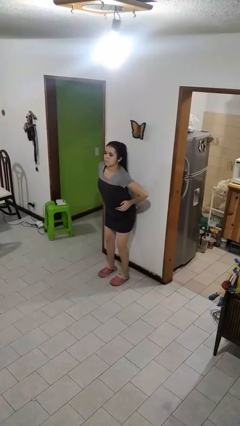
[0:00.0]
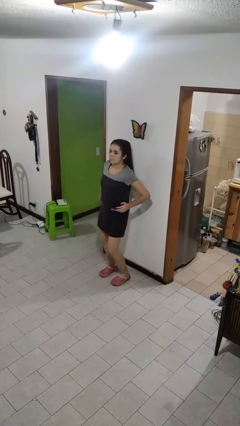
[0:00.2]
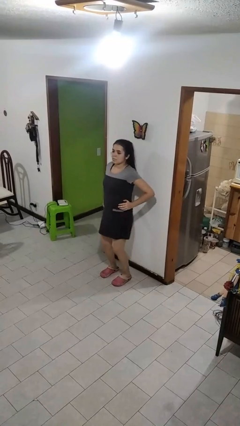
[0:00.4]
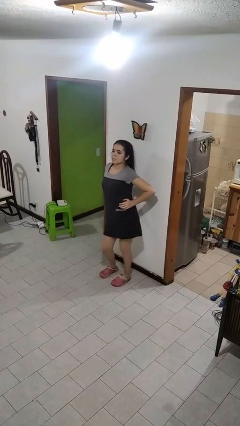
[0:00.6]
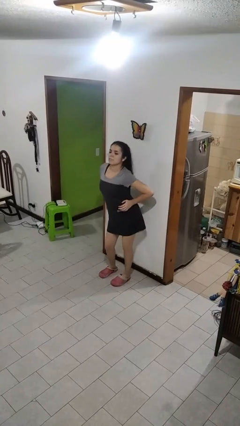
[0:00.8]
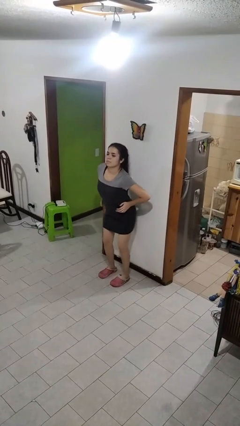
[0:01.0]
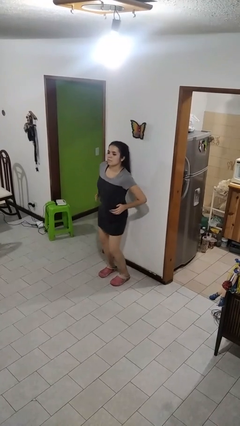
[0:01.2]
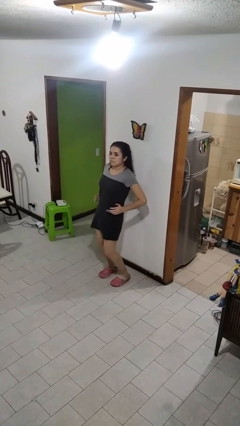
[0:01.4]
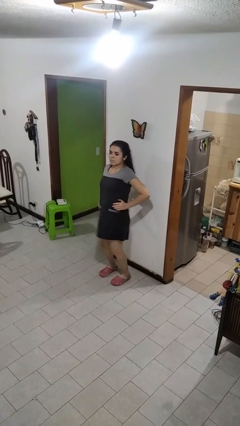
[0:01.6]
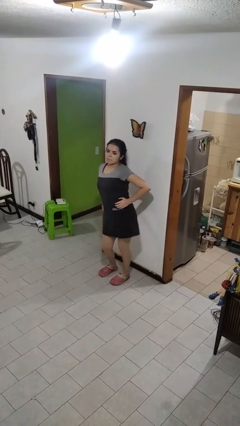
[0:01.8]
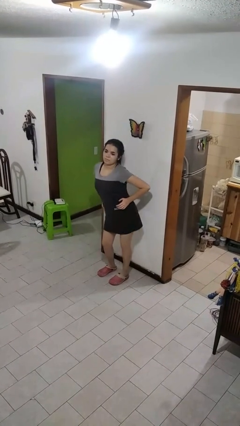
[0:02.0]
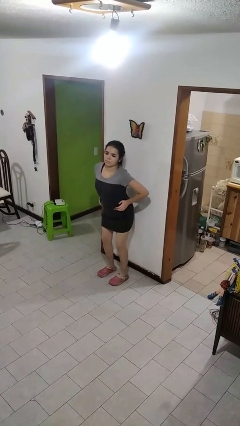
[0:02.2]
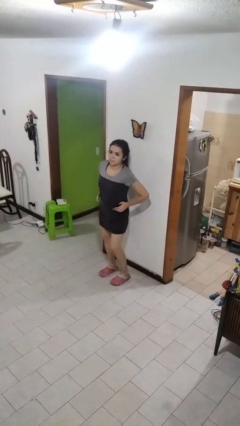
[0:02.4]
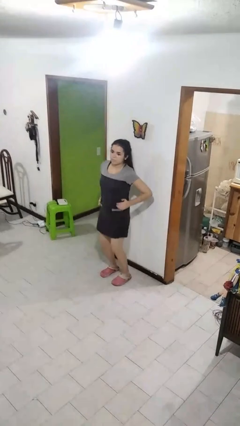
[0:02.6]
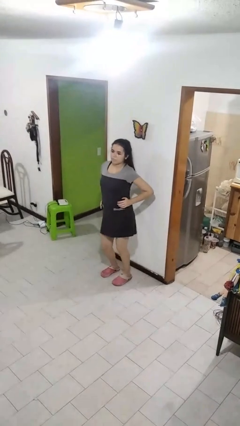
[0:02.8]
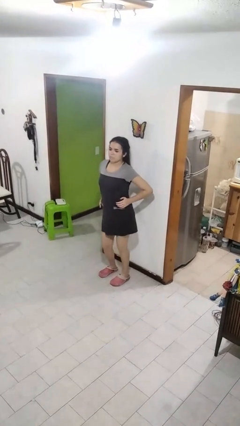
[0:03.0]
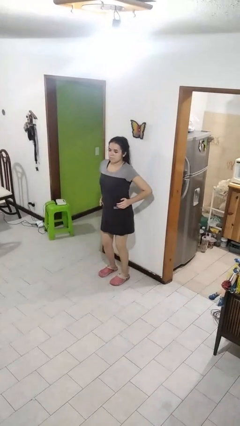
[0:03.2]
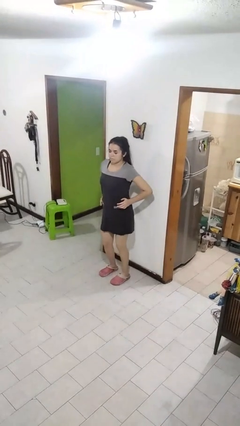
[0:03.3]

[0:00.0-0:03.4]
person wiggles hips

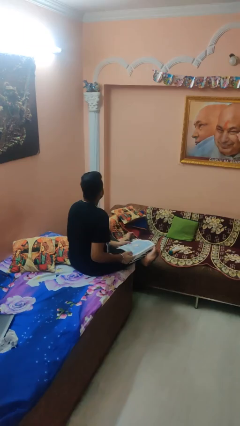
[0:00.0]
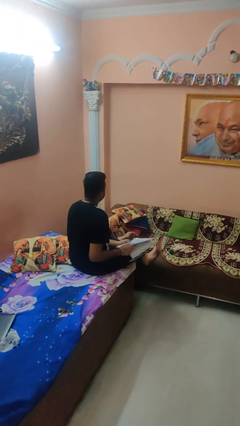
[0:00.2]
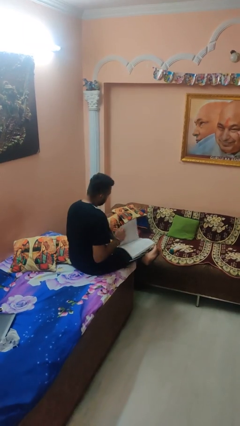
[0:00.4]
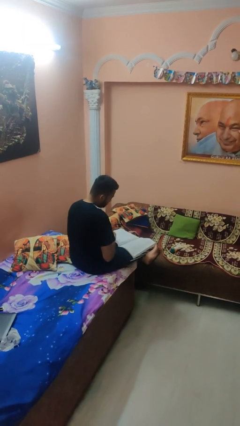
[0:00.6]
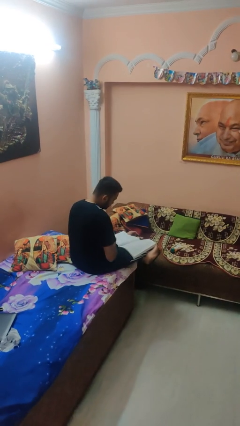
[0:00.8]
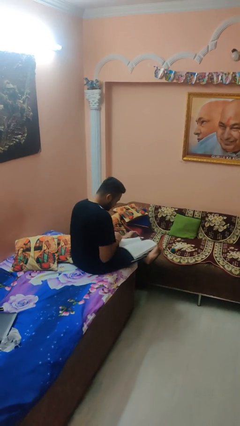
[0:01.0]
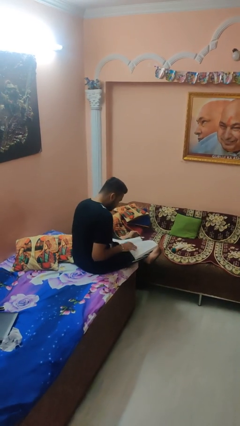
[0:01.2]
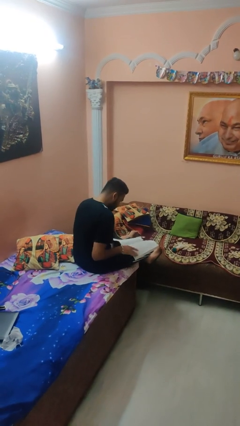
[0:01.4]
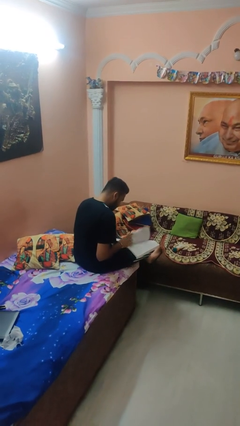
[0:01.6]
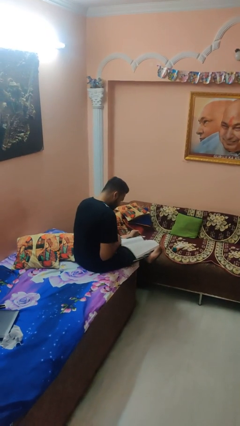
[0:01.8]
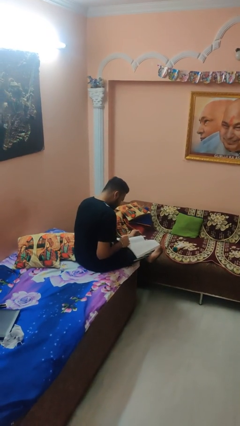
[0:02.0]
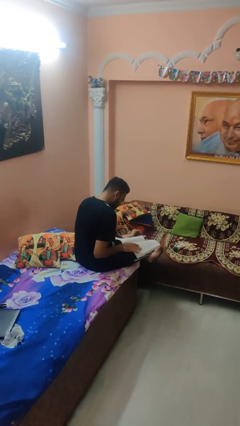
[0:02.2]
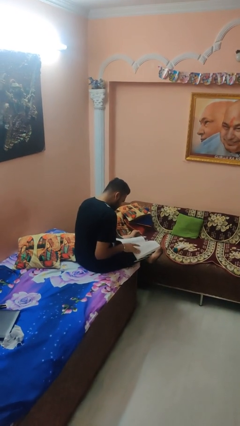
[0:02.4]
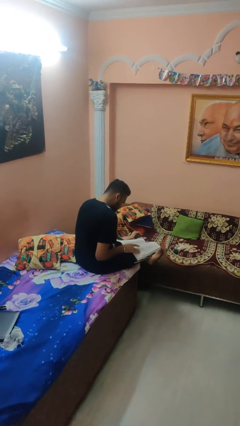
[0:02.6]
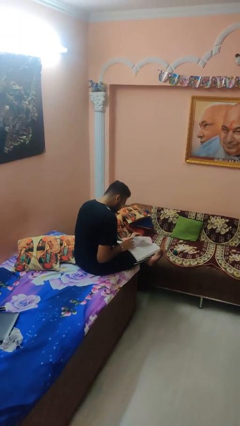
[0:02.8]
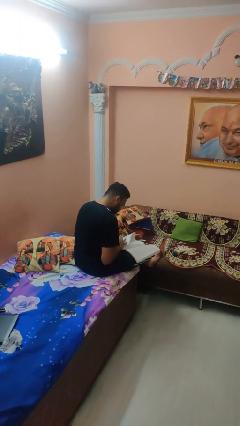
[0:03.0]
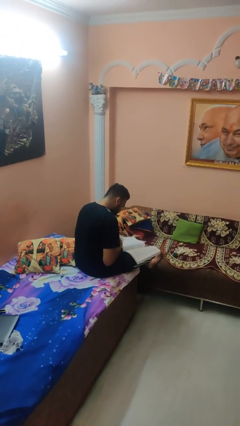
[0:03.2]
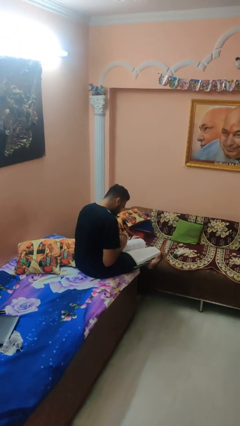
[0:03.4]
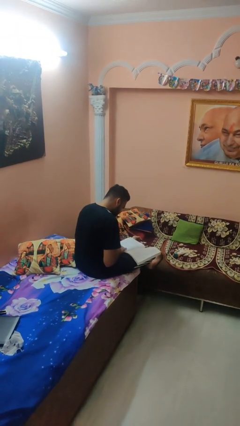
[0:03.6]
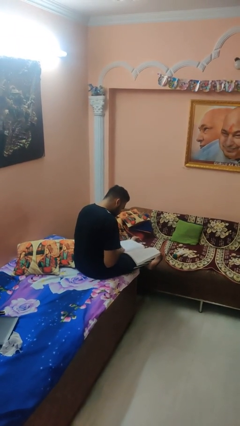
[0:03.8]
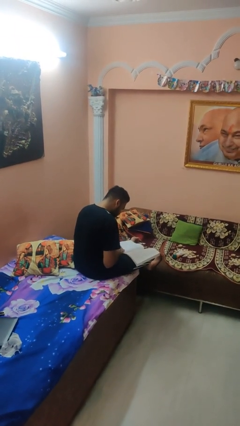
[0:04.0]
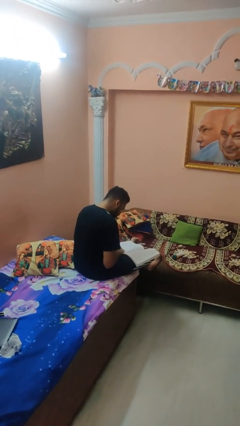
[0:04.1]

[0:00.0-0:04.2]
person reads book

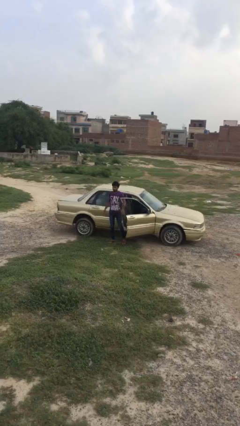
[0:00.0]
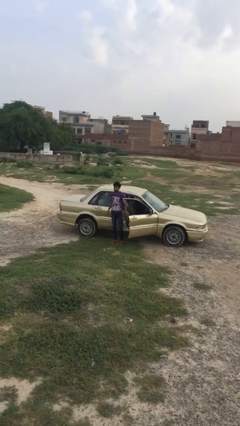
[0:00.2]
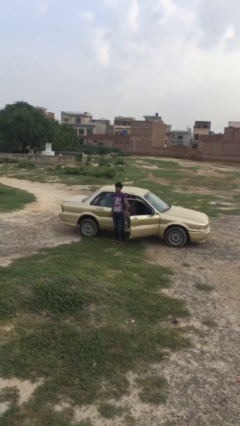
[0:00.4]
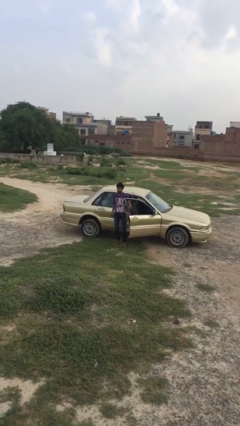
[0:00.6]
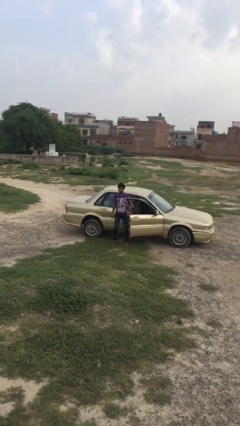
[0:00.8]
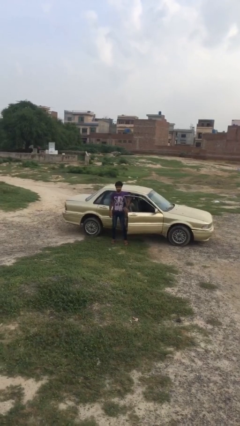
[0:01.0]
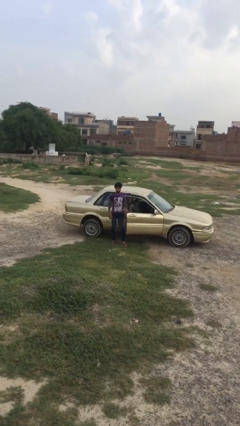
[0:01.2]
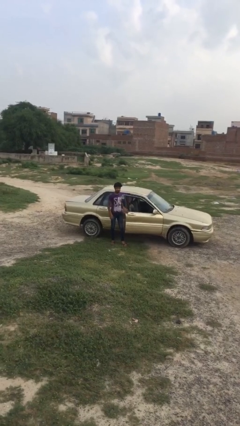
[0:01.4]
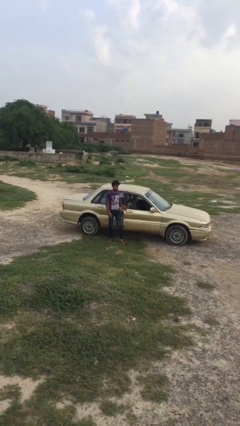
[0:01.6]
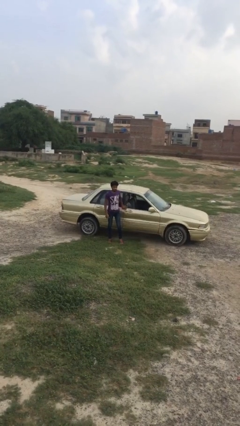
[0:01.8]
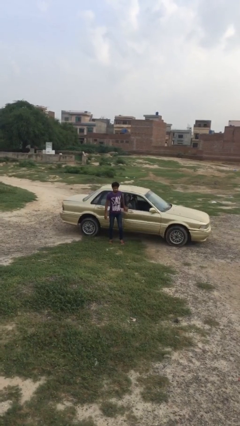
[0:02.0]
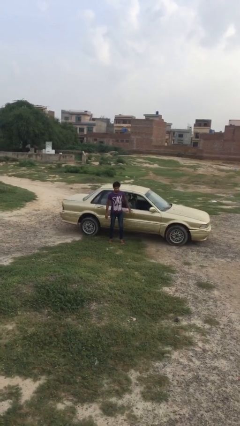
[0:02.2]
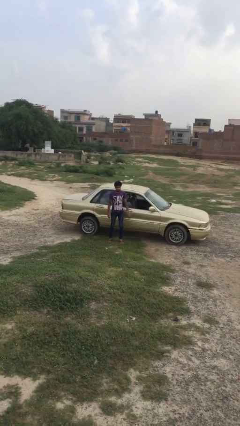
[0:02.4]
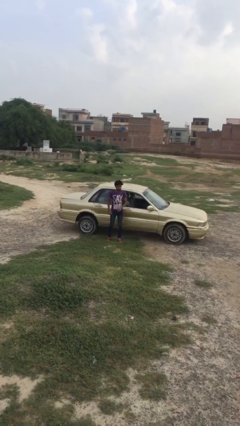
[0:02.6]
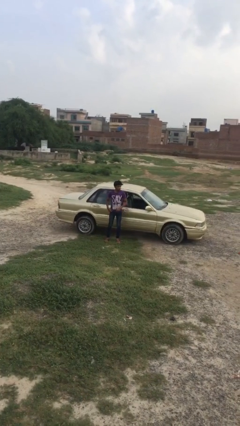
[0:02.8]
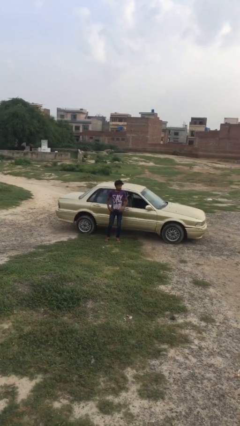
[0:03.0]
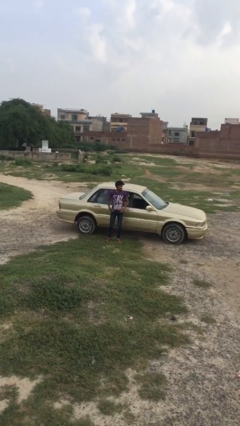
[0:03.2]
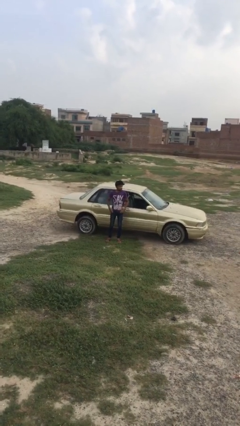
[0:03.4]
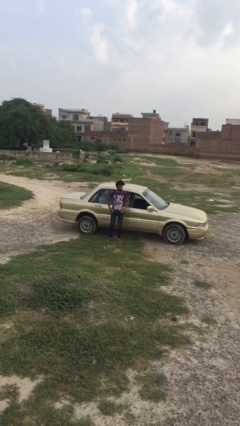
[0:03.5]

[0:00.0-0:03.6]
person closes car door

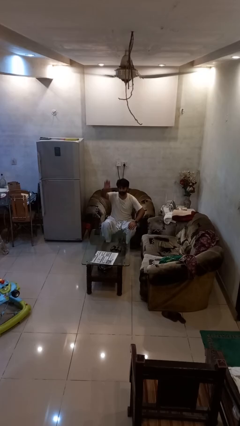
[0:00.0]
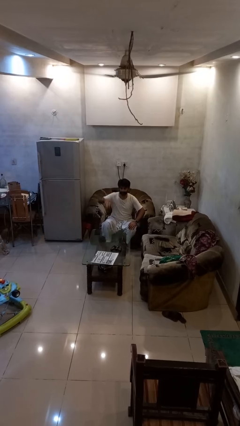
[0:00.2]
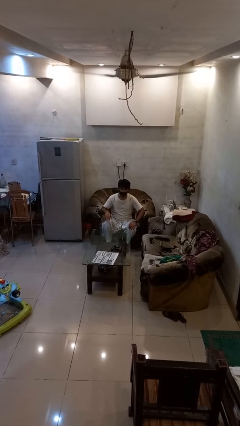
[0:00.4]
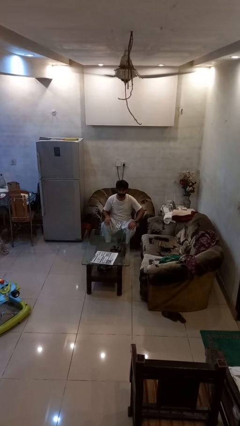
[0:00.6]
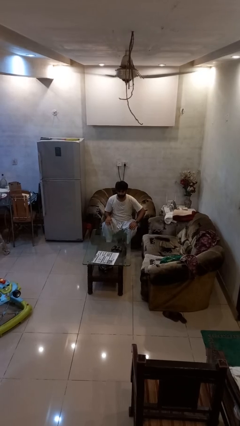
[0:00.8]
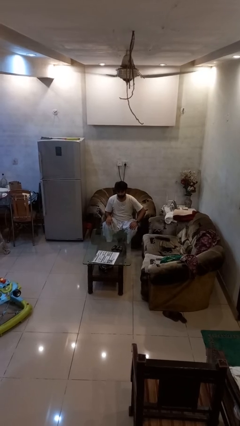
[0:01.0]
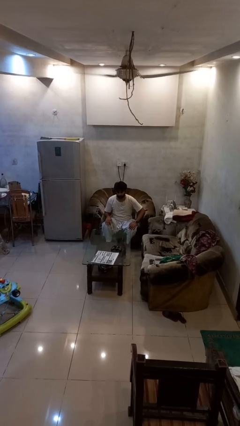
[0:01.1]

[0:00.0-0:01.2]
person gestures lower hand

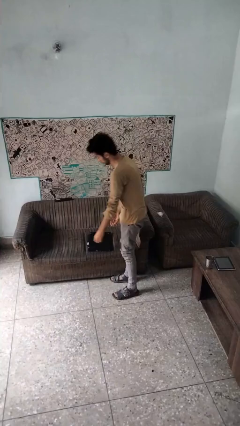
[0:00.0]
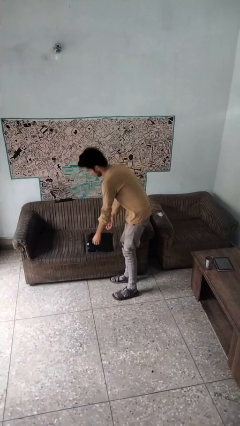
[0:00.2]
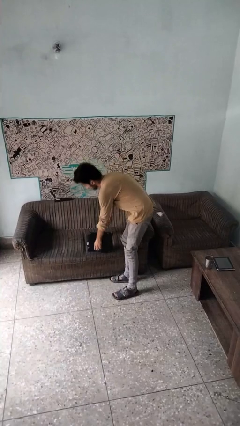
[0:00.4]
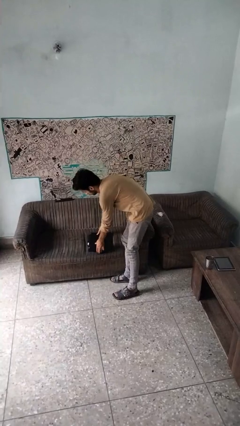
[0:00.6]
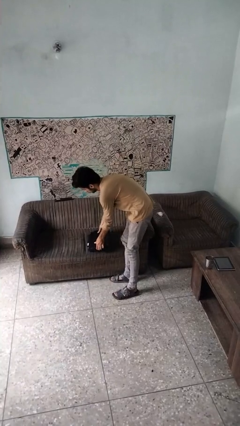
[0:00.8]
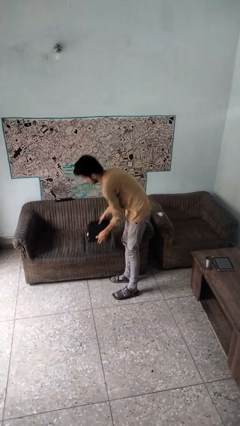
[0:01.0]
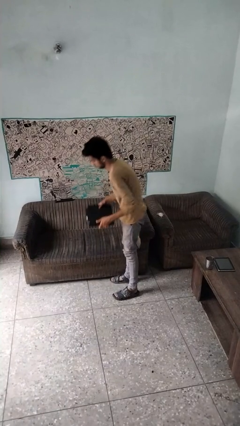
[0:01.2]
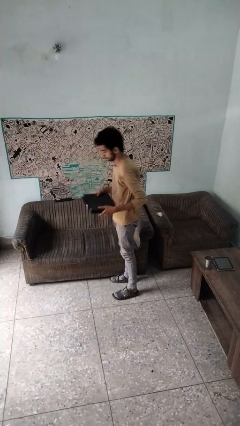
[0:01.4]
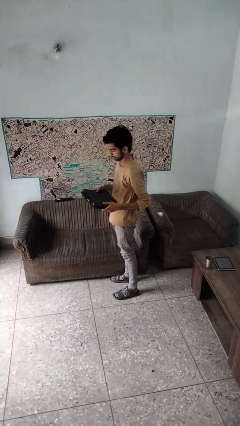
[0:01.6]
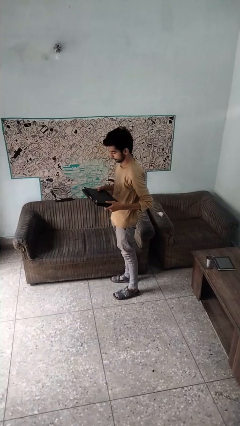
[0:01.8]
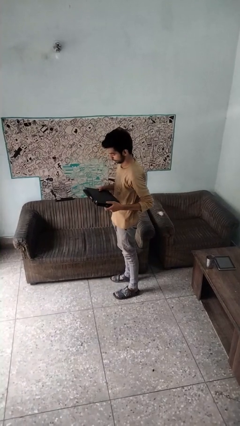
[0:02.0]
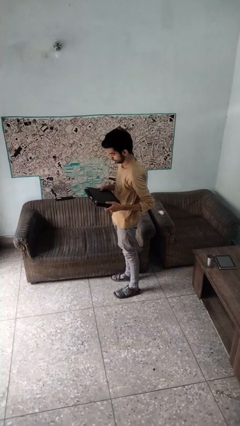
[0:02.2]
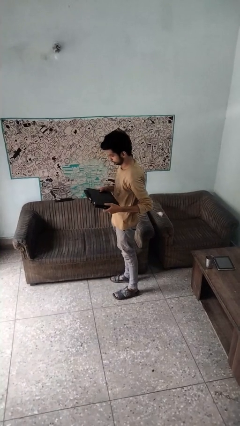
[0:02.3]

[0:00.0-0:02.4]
person picks up object from couch

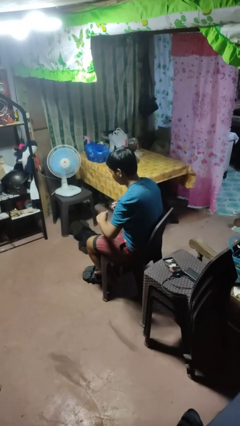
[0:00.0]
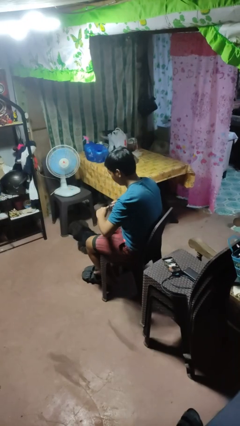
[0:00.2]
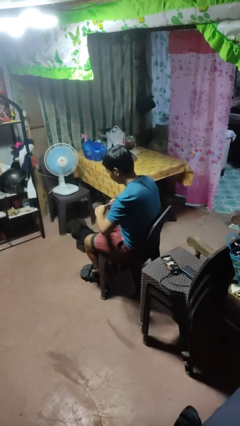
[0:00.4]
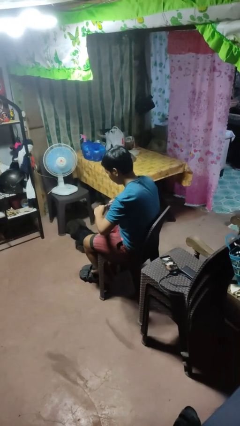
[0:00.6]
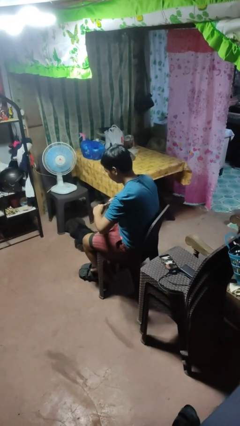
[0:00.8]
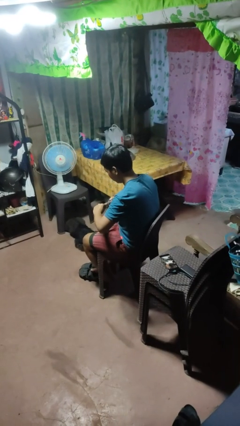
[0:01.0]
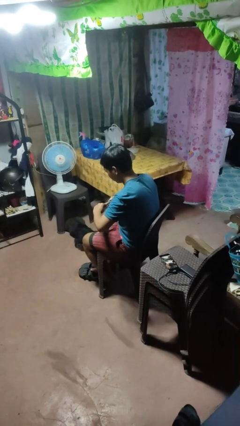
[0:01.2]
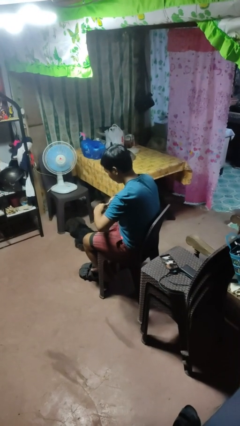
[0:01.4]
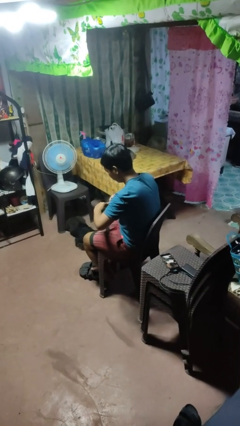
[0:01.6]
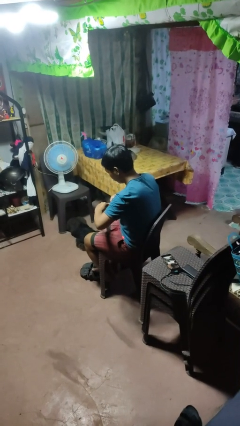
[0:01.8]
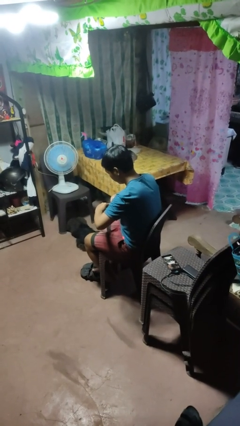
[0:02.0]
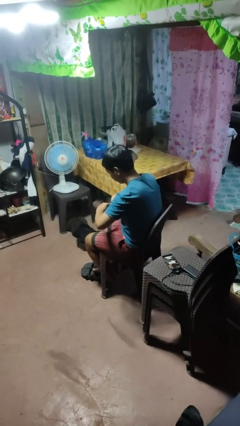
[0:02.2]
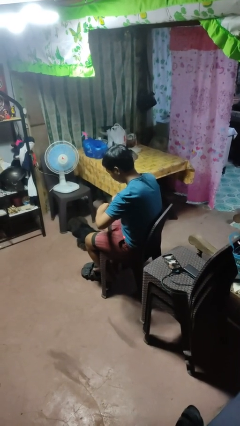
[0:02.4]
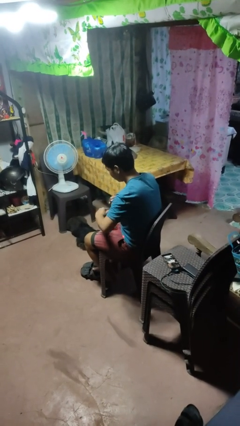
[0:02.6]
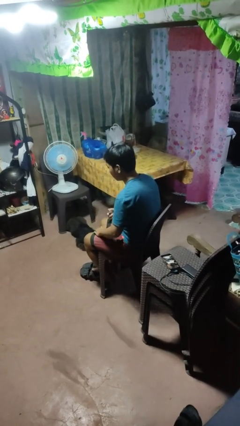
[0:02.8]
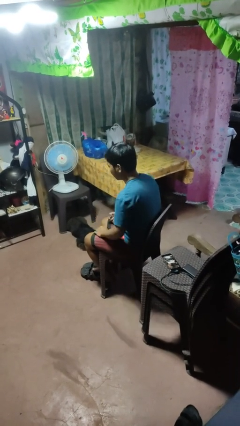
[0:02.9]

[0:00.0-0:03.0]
person clips fingernails
